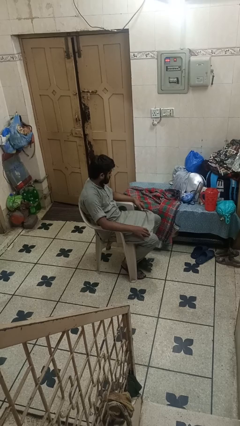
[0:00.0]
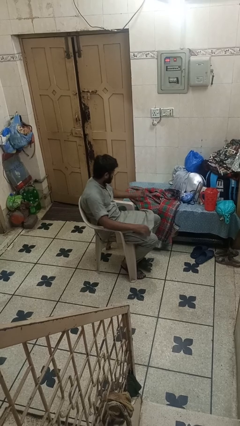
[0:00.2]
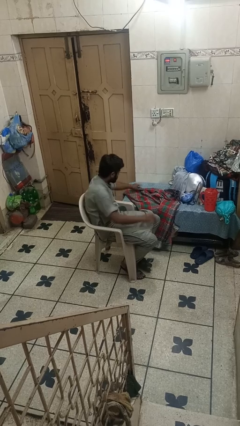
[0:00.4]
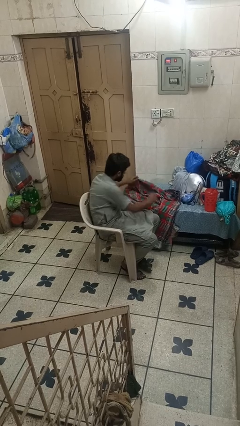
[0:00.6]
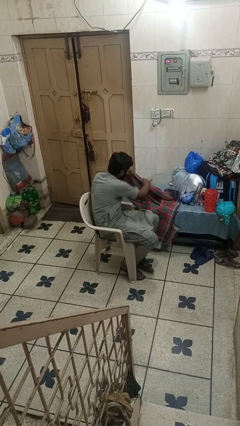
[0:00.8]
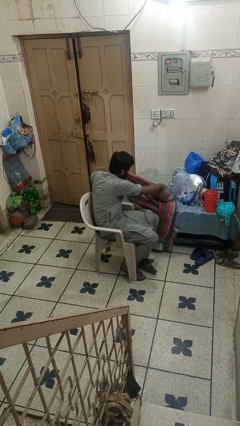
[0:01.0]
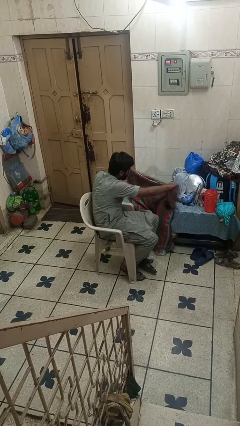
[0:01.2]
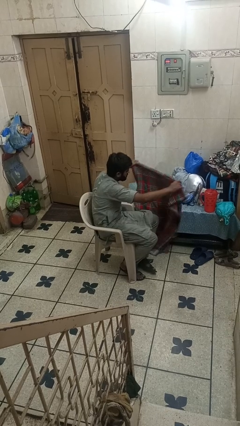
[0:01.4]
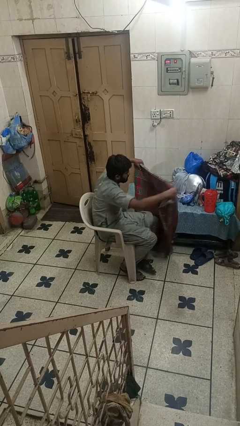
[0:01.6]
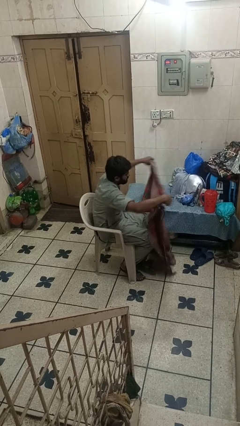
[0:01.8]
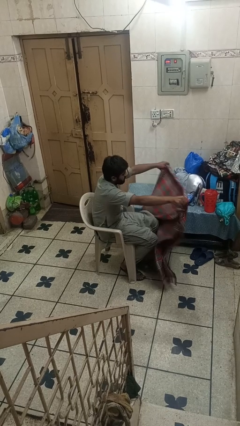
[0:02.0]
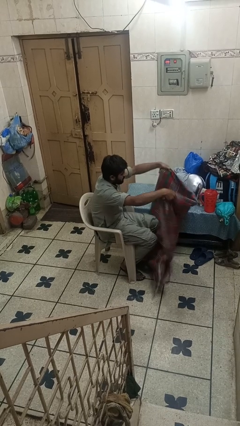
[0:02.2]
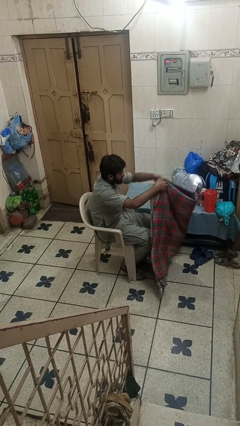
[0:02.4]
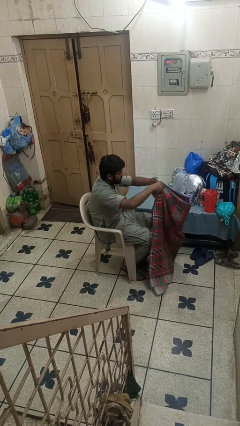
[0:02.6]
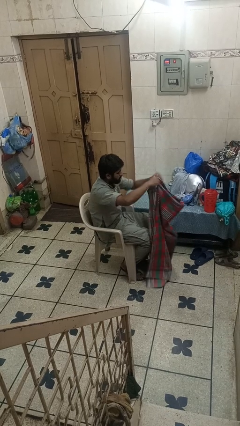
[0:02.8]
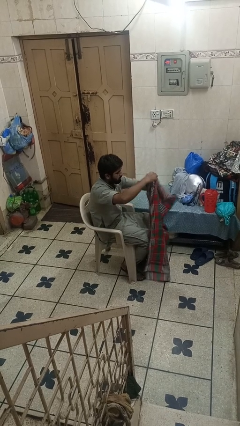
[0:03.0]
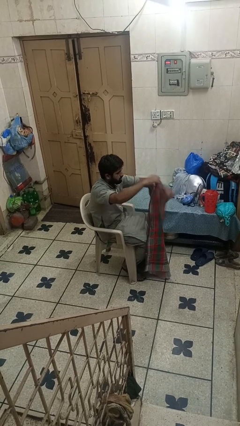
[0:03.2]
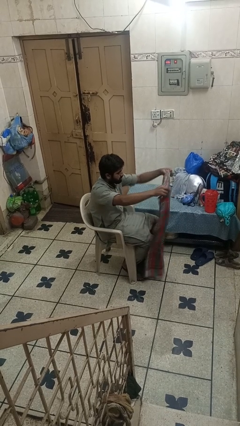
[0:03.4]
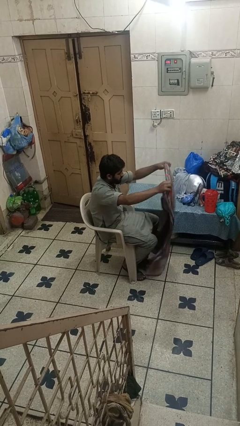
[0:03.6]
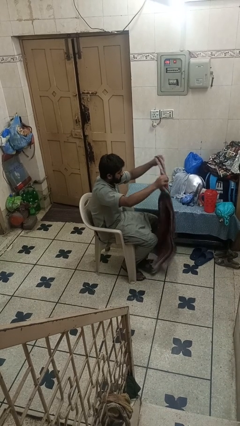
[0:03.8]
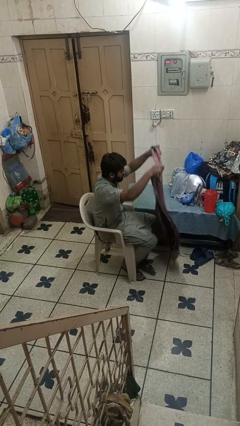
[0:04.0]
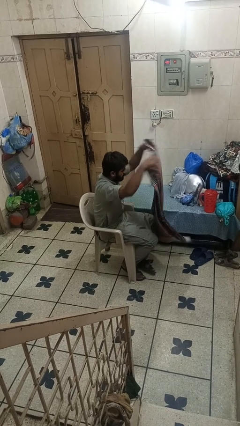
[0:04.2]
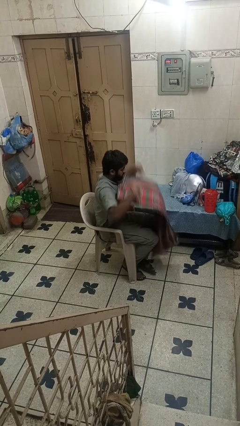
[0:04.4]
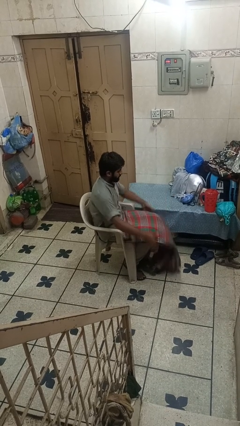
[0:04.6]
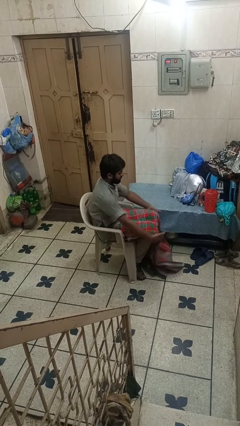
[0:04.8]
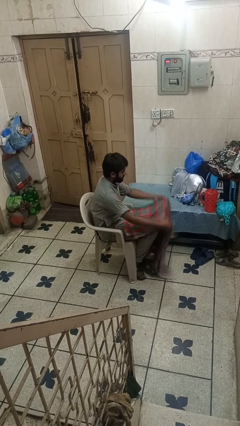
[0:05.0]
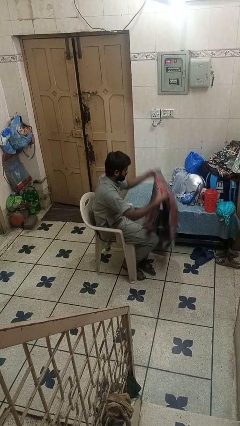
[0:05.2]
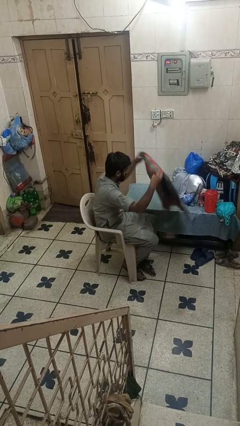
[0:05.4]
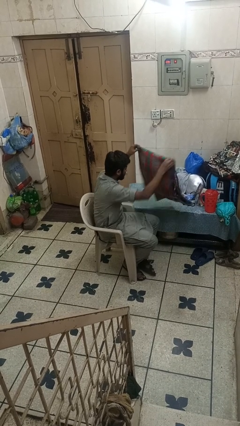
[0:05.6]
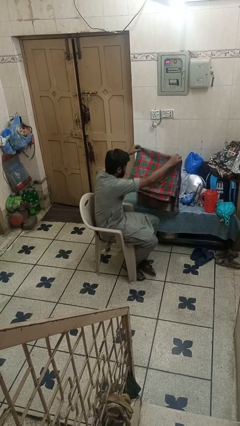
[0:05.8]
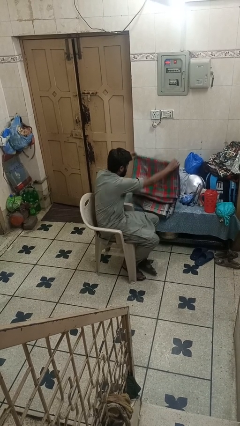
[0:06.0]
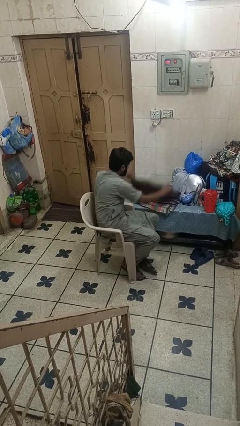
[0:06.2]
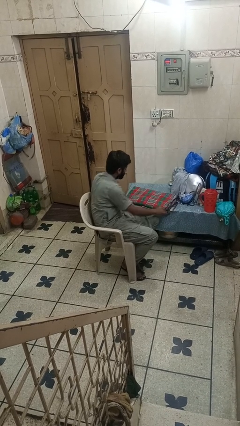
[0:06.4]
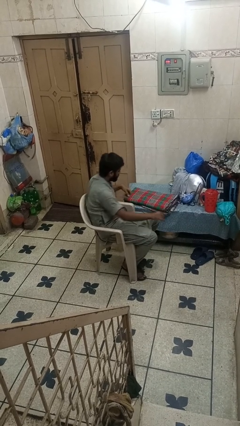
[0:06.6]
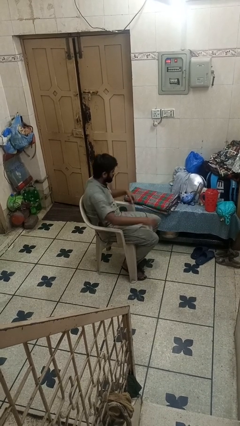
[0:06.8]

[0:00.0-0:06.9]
person folds blanket

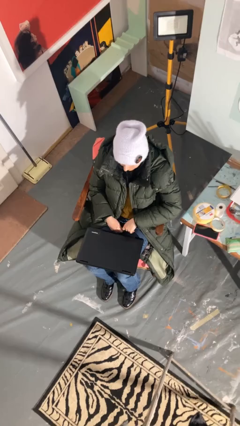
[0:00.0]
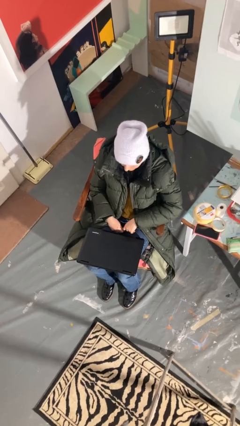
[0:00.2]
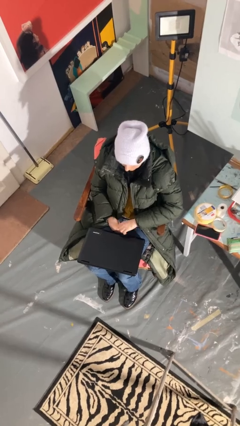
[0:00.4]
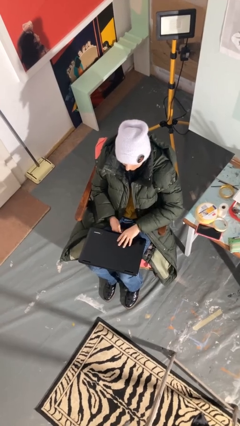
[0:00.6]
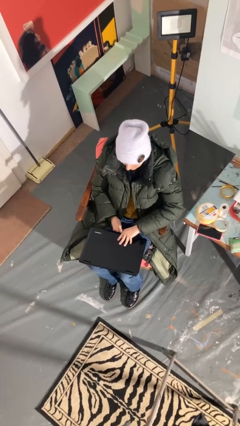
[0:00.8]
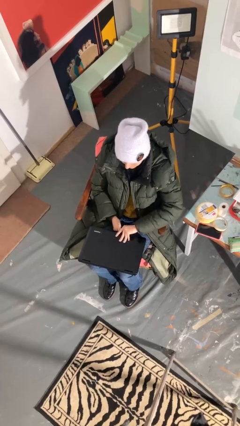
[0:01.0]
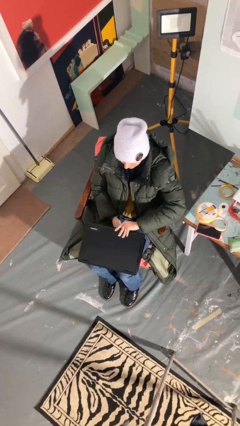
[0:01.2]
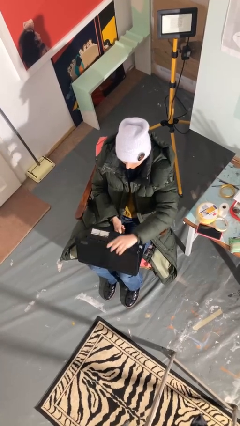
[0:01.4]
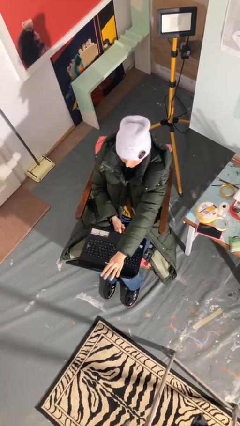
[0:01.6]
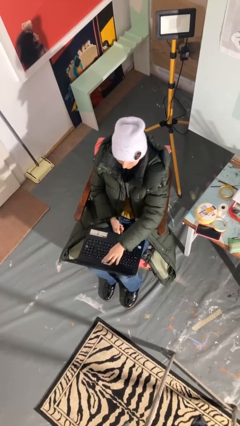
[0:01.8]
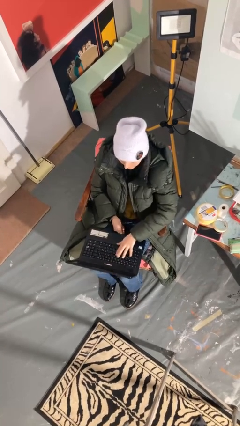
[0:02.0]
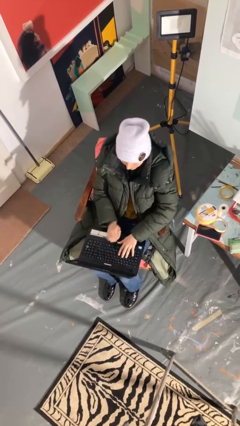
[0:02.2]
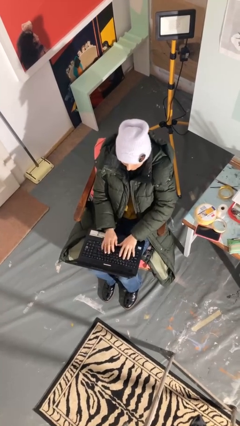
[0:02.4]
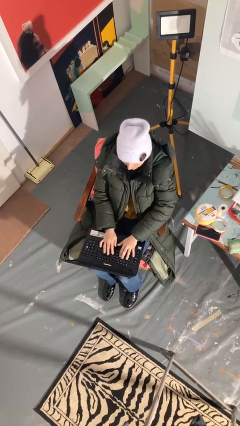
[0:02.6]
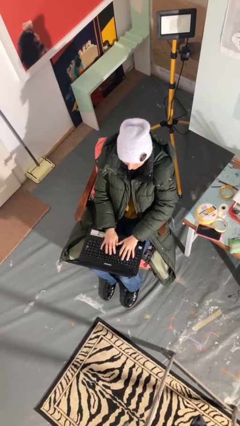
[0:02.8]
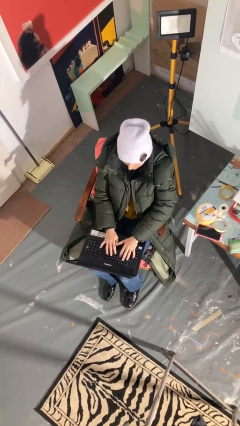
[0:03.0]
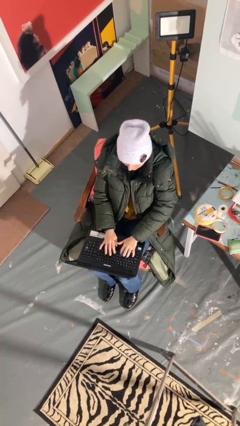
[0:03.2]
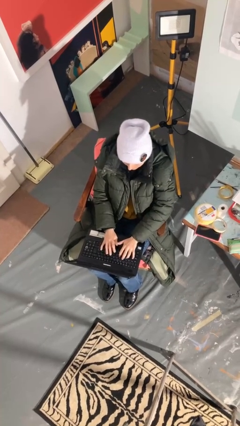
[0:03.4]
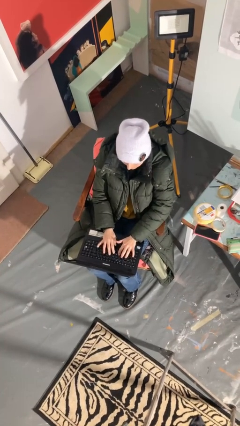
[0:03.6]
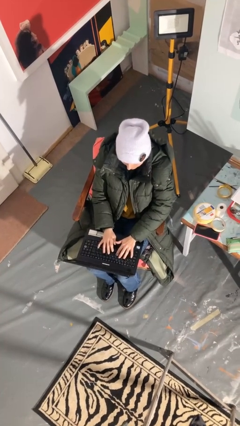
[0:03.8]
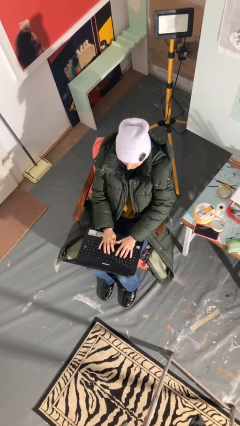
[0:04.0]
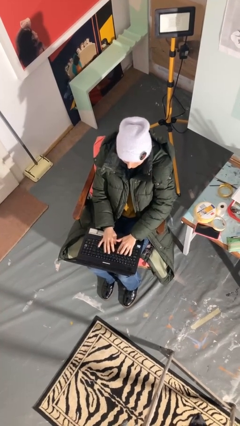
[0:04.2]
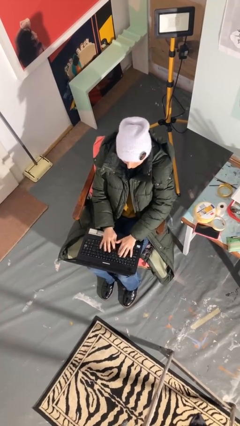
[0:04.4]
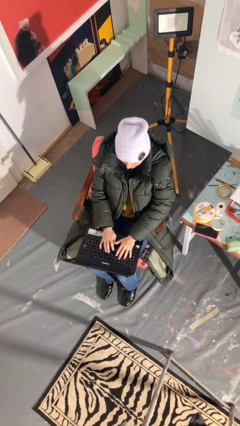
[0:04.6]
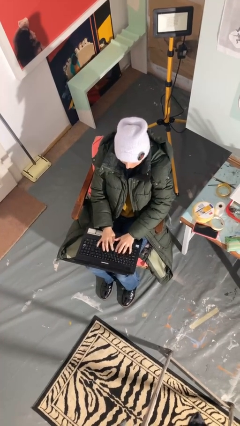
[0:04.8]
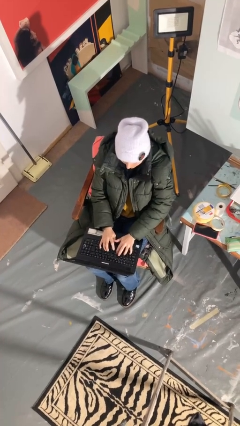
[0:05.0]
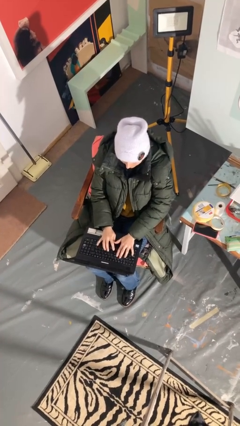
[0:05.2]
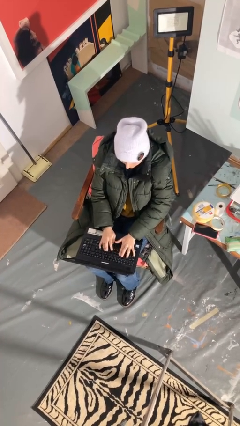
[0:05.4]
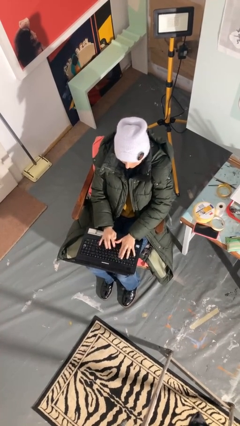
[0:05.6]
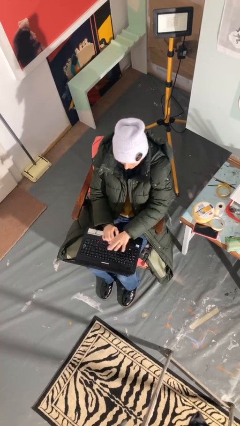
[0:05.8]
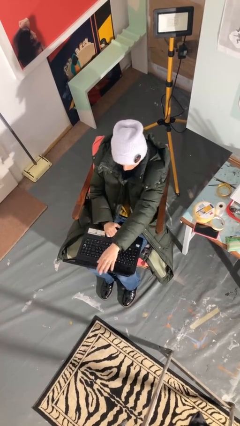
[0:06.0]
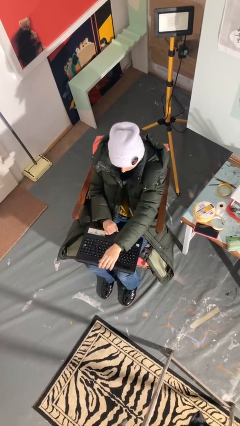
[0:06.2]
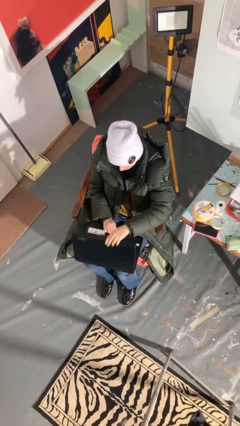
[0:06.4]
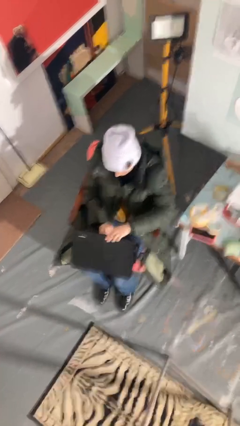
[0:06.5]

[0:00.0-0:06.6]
person interacts with laptop

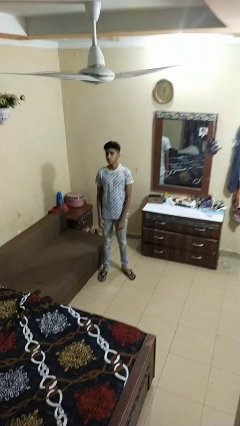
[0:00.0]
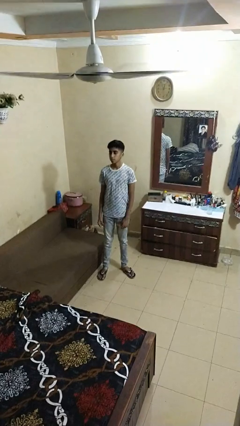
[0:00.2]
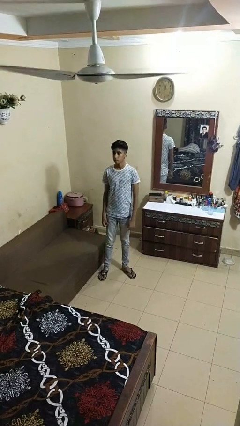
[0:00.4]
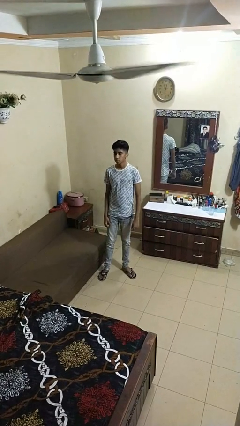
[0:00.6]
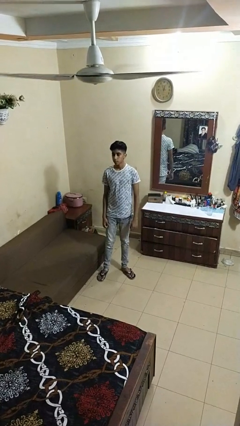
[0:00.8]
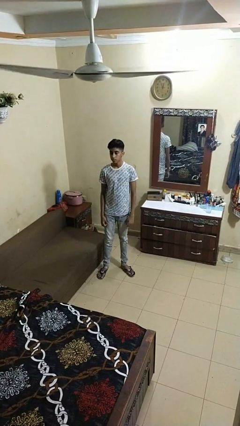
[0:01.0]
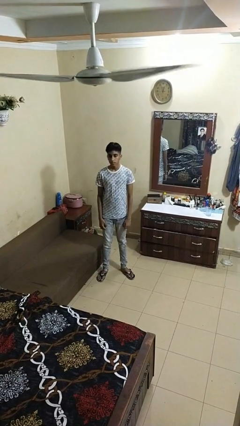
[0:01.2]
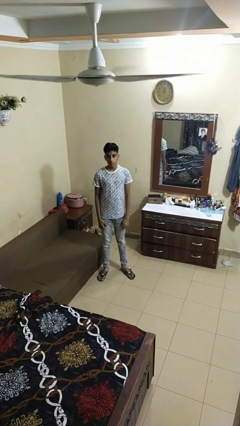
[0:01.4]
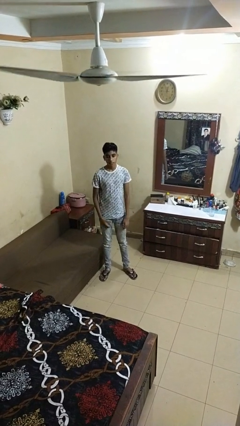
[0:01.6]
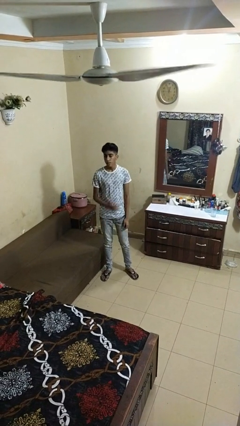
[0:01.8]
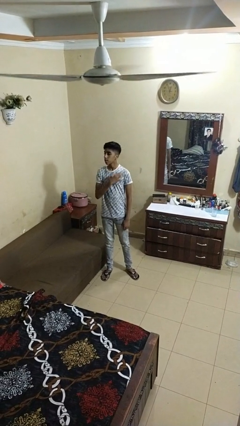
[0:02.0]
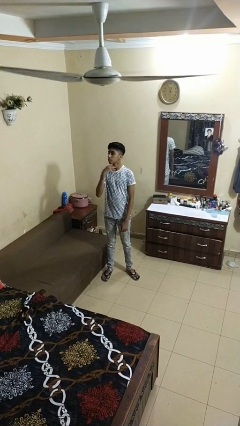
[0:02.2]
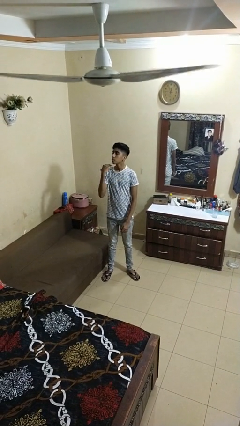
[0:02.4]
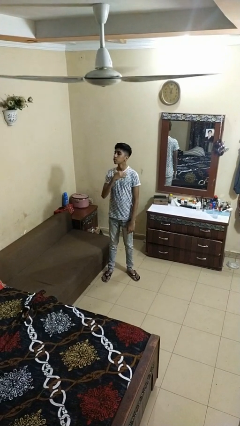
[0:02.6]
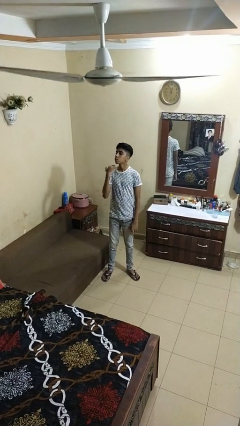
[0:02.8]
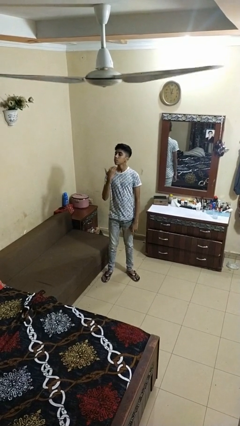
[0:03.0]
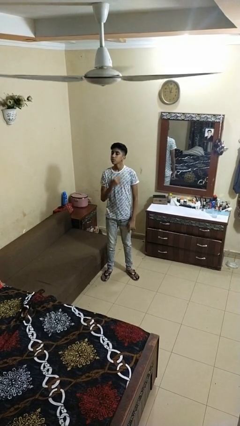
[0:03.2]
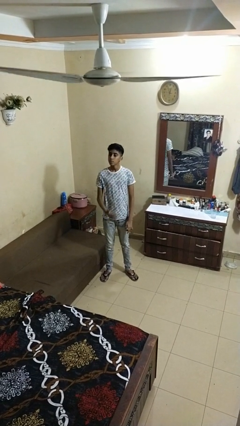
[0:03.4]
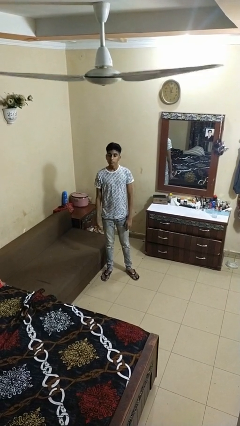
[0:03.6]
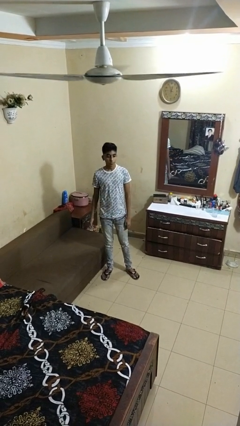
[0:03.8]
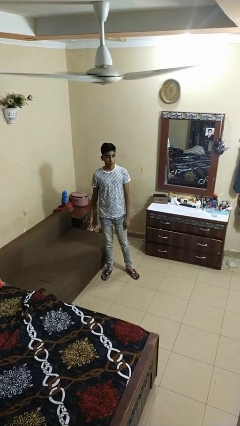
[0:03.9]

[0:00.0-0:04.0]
person gestures cut

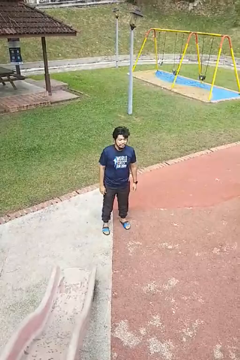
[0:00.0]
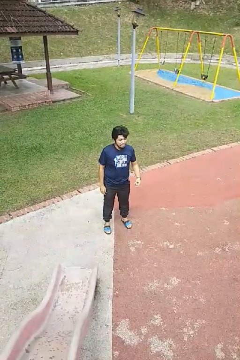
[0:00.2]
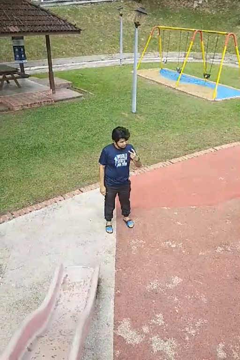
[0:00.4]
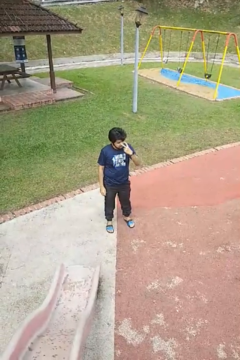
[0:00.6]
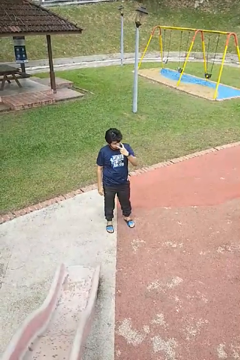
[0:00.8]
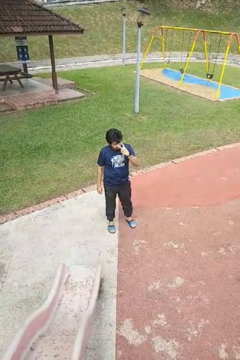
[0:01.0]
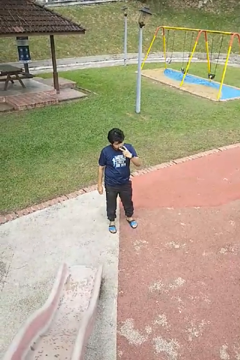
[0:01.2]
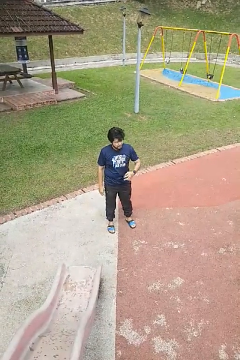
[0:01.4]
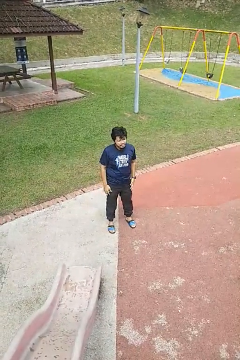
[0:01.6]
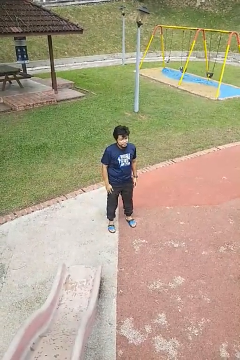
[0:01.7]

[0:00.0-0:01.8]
person gestures watch closely
